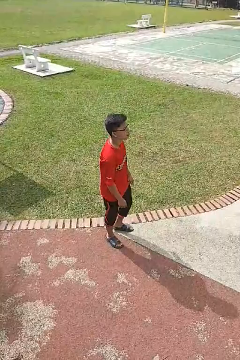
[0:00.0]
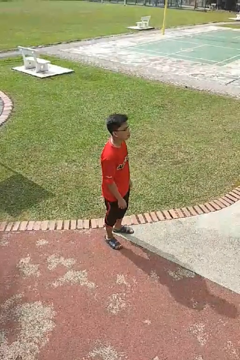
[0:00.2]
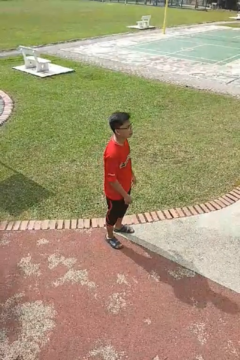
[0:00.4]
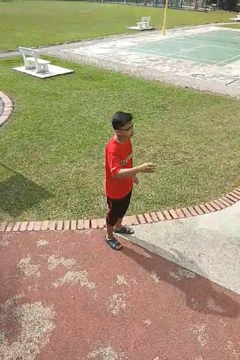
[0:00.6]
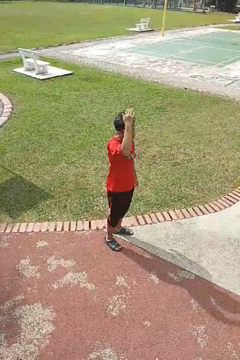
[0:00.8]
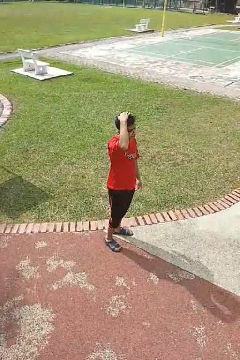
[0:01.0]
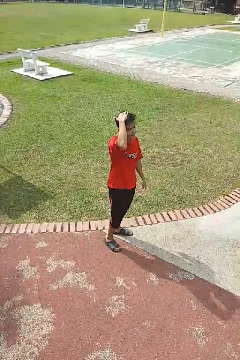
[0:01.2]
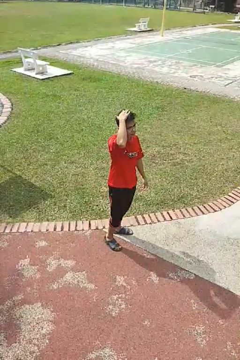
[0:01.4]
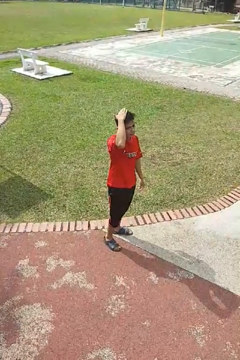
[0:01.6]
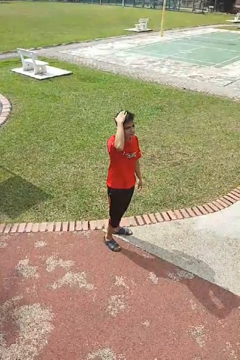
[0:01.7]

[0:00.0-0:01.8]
person pats head

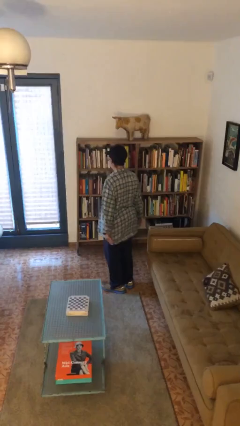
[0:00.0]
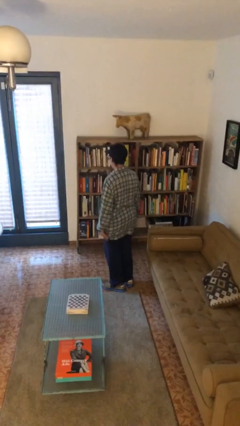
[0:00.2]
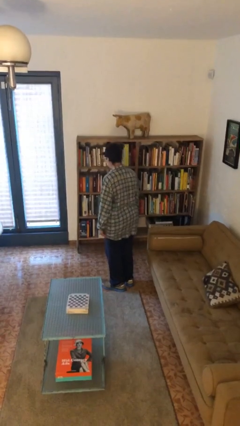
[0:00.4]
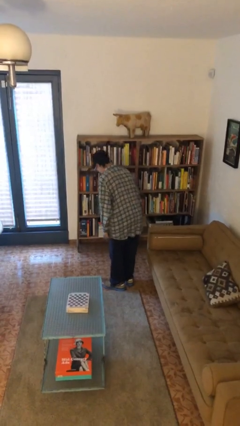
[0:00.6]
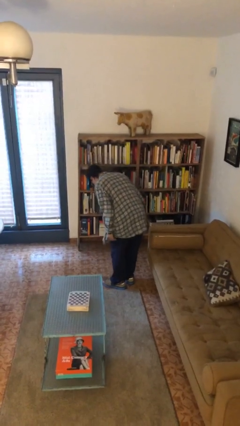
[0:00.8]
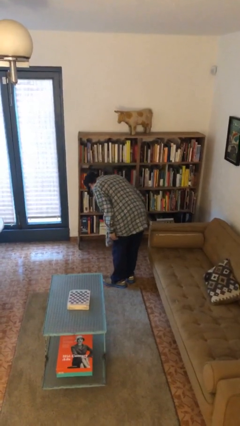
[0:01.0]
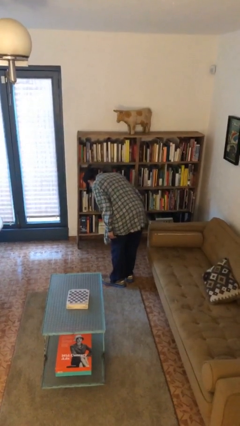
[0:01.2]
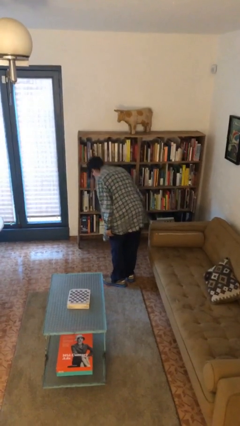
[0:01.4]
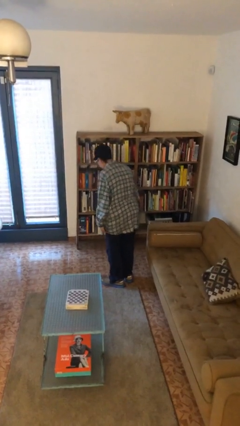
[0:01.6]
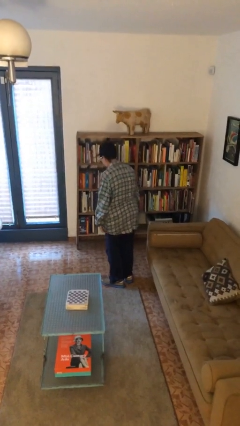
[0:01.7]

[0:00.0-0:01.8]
person bows

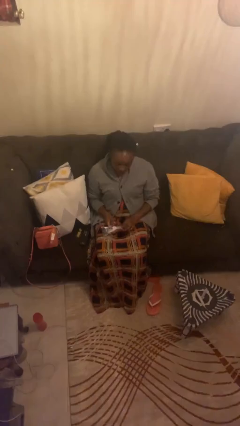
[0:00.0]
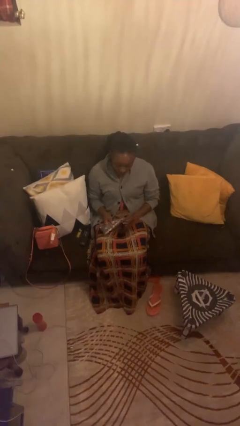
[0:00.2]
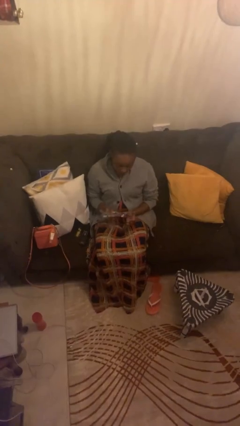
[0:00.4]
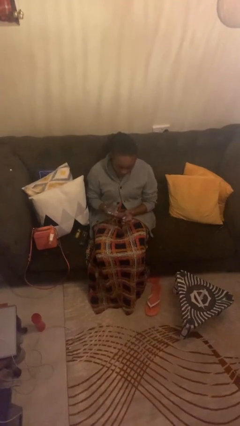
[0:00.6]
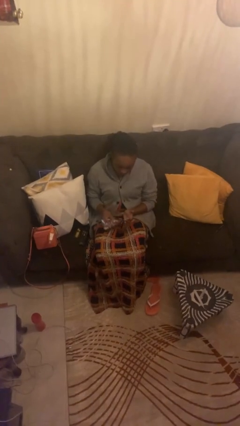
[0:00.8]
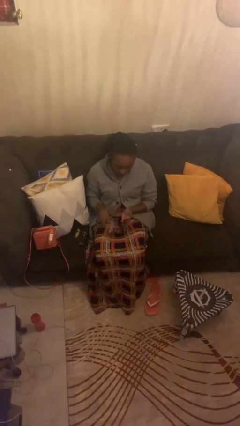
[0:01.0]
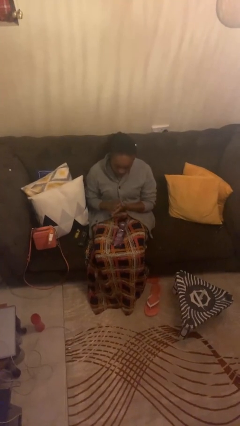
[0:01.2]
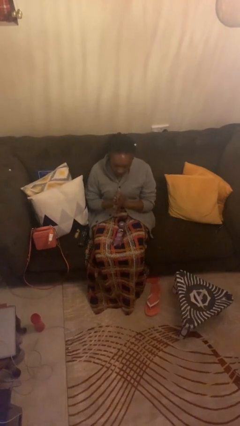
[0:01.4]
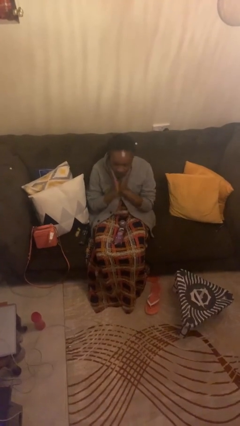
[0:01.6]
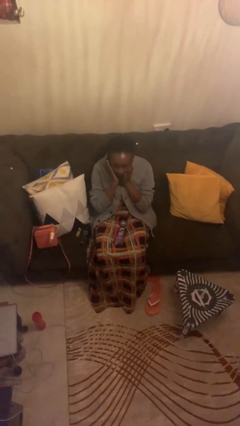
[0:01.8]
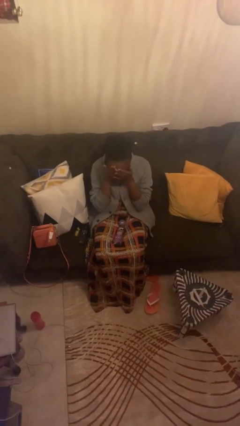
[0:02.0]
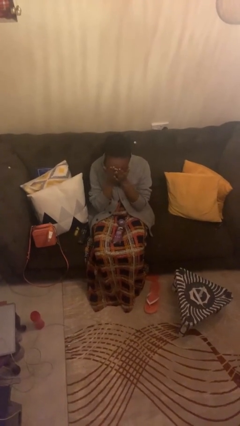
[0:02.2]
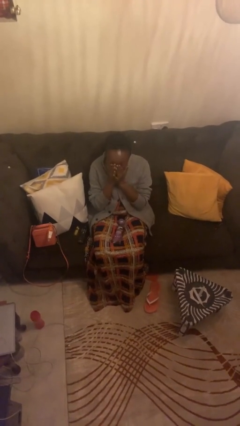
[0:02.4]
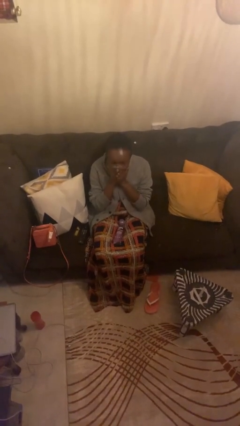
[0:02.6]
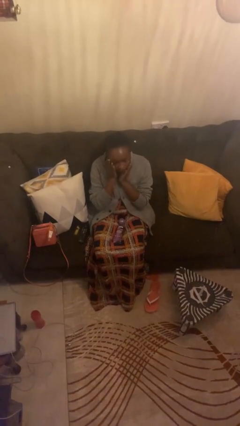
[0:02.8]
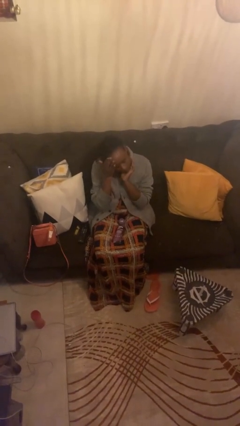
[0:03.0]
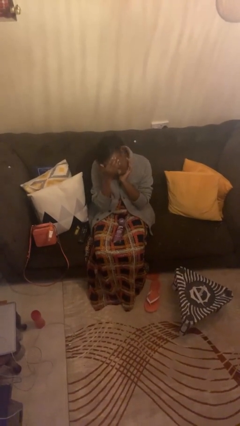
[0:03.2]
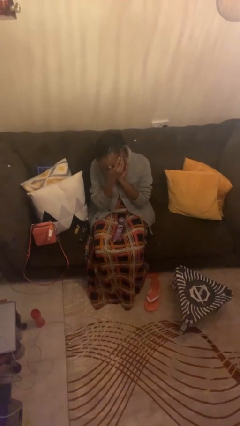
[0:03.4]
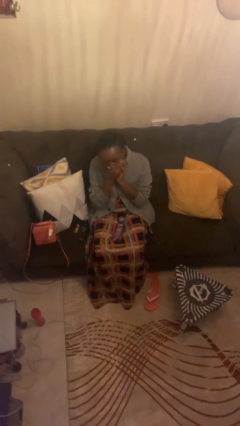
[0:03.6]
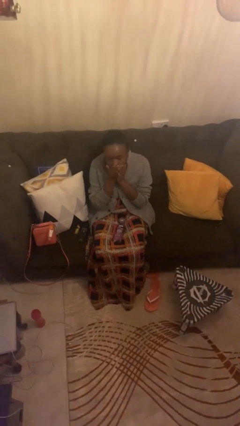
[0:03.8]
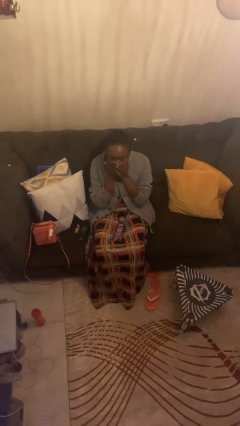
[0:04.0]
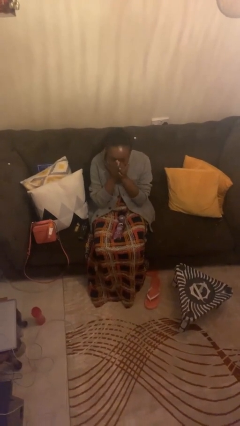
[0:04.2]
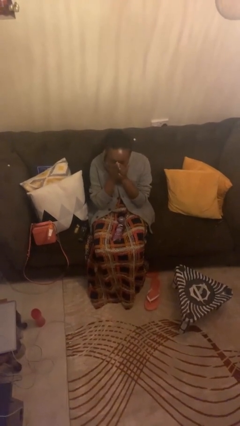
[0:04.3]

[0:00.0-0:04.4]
person applies facial moisturizer

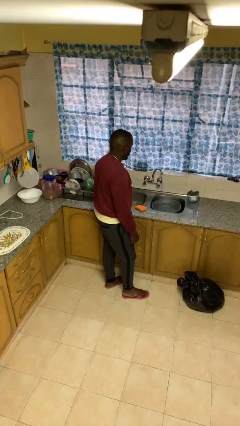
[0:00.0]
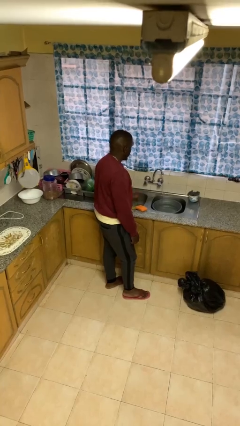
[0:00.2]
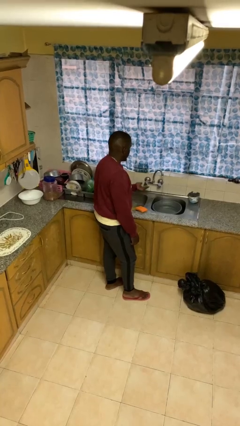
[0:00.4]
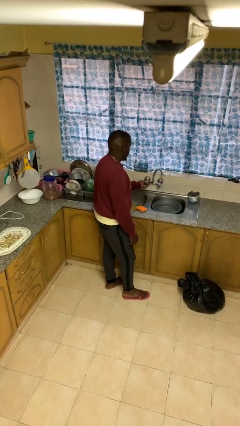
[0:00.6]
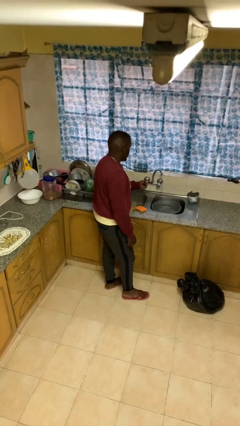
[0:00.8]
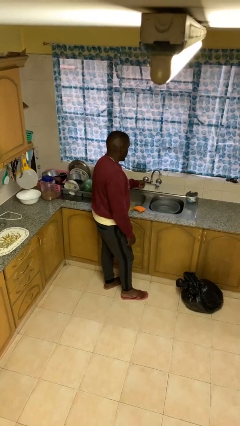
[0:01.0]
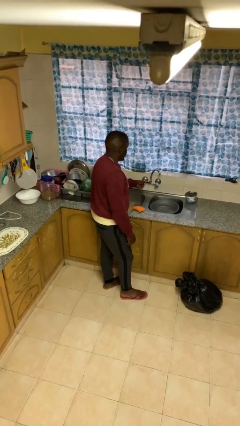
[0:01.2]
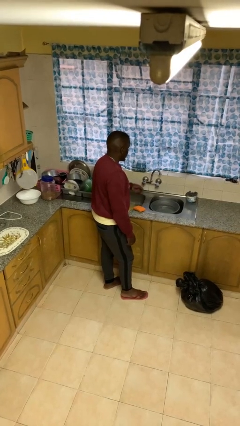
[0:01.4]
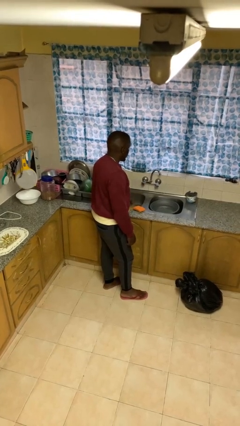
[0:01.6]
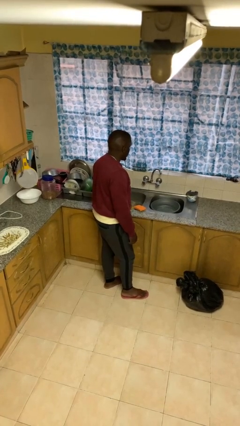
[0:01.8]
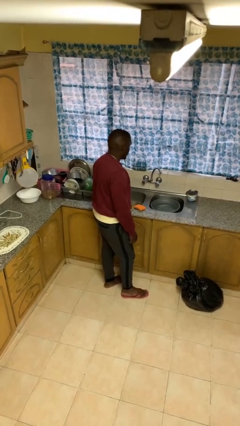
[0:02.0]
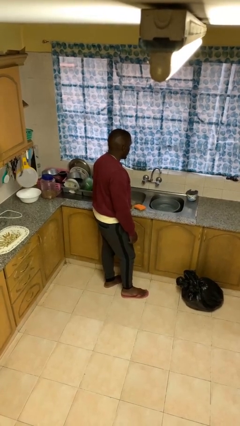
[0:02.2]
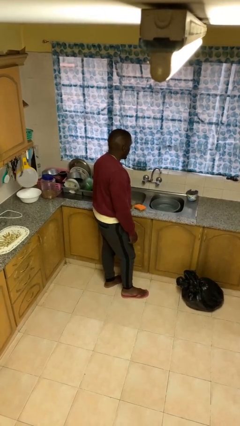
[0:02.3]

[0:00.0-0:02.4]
person turns off faucet

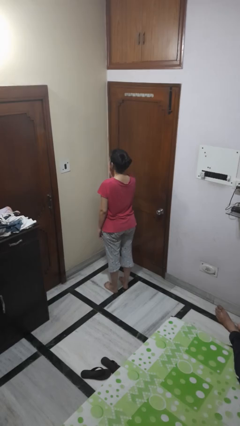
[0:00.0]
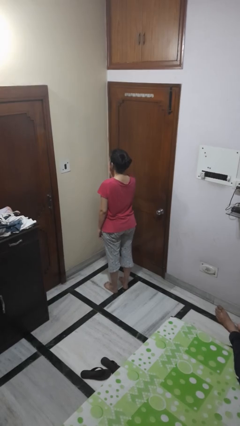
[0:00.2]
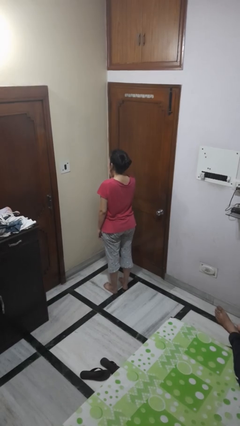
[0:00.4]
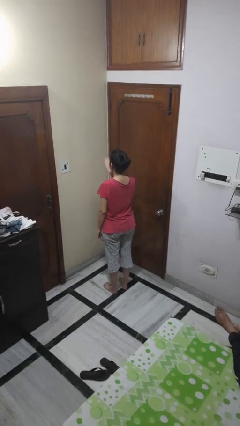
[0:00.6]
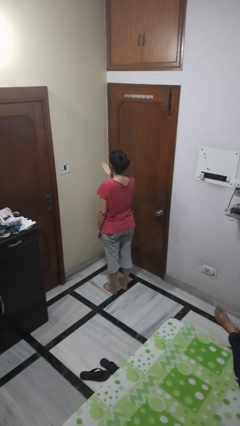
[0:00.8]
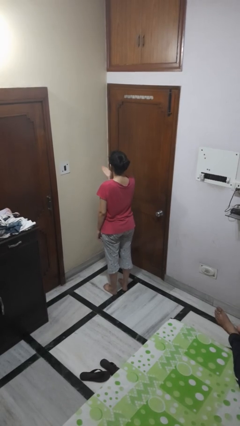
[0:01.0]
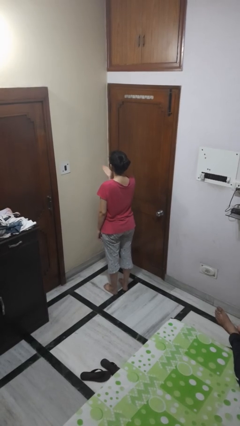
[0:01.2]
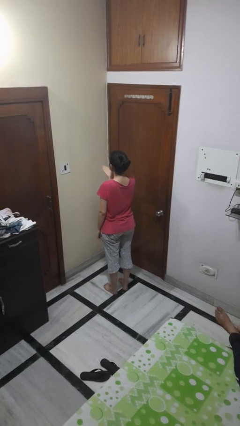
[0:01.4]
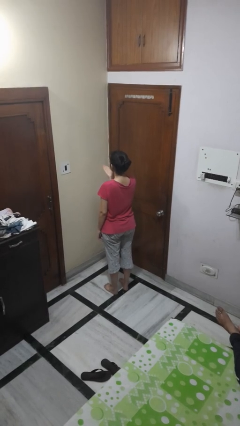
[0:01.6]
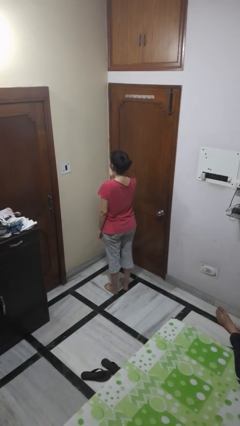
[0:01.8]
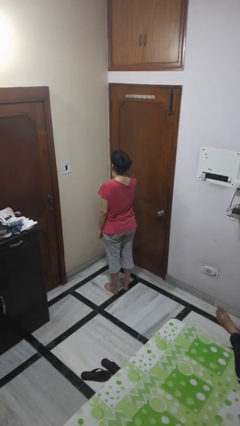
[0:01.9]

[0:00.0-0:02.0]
person gestures blow kiss

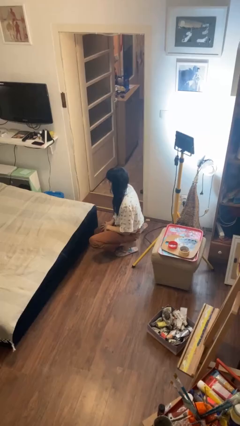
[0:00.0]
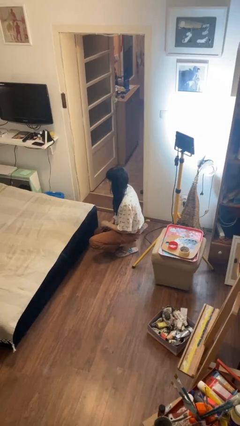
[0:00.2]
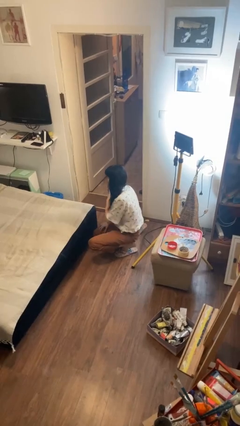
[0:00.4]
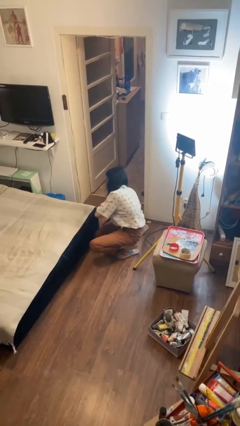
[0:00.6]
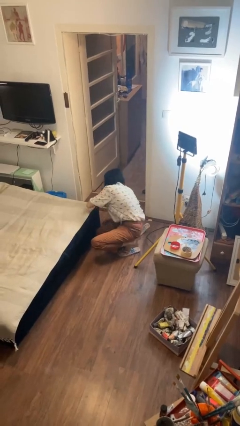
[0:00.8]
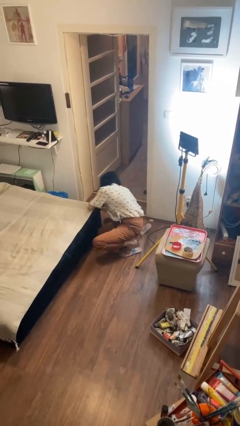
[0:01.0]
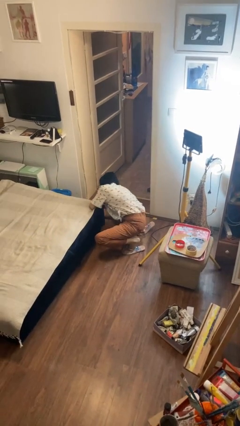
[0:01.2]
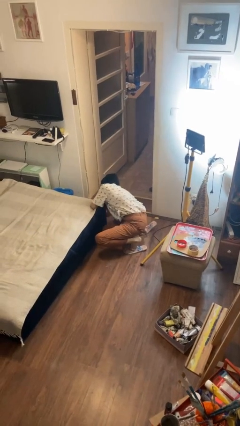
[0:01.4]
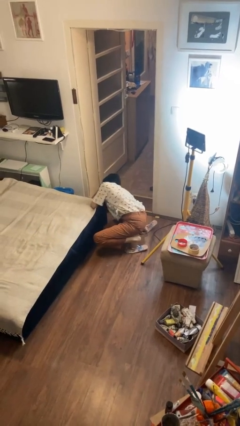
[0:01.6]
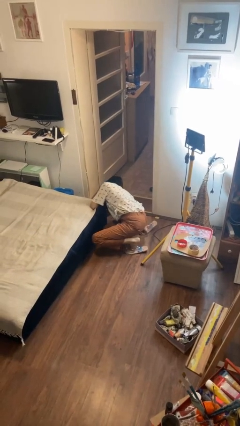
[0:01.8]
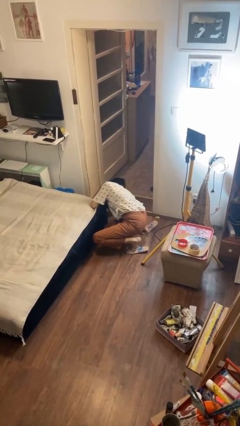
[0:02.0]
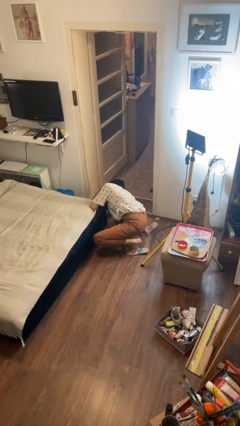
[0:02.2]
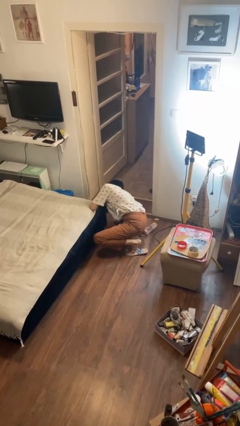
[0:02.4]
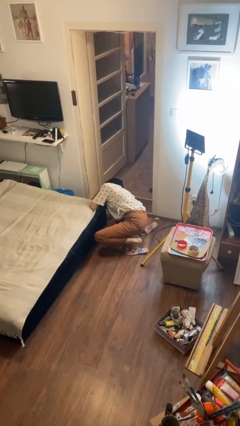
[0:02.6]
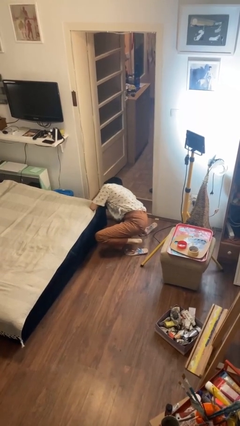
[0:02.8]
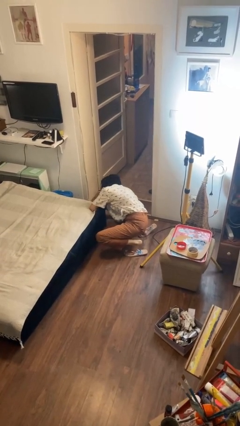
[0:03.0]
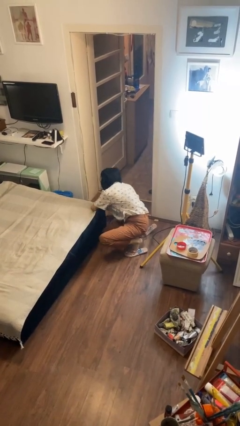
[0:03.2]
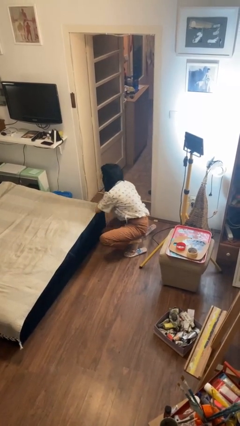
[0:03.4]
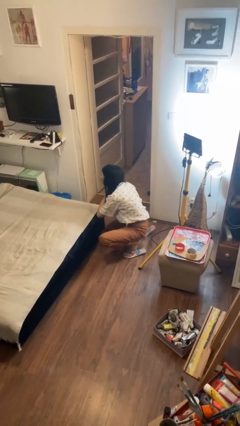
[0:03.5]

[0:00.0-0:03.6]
person searches under bed

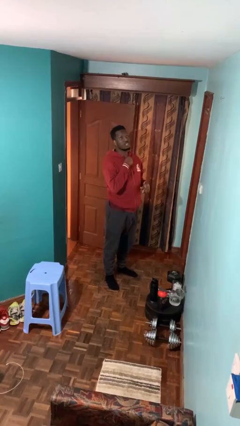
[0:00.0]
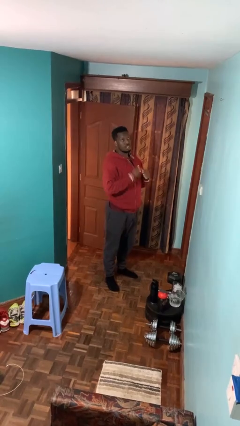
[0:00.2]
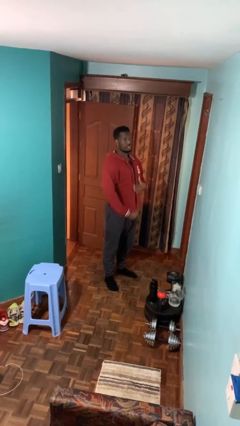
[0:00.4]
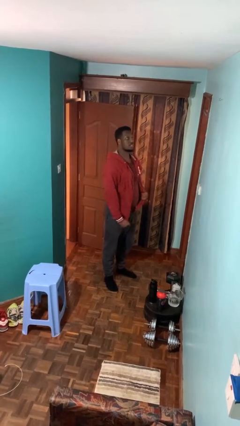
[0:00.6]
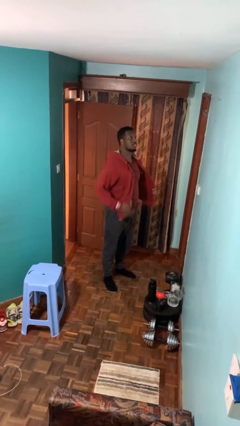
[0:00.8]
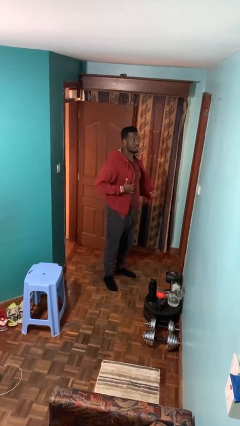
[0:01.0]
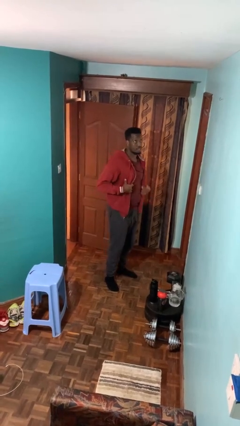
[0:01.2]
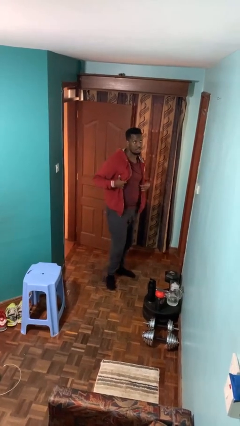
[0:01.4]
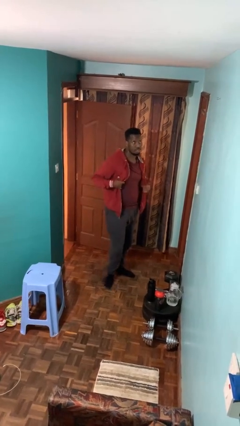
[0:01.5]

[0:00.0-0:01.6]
person unzips jacket
